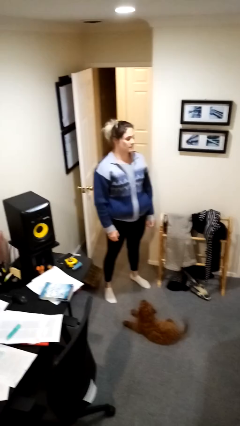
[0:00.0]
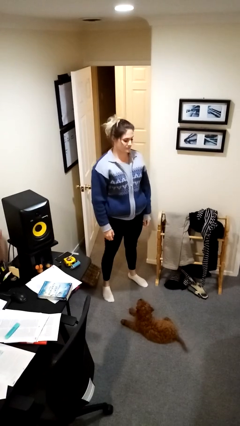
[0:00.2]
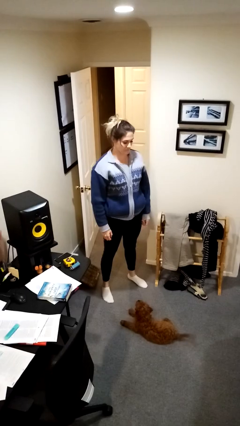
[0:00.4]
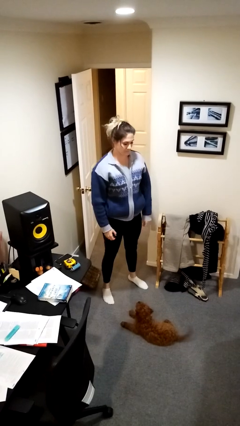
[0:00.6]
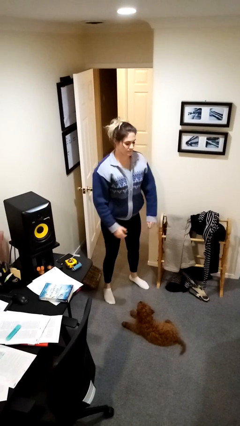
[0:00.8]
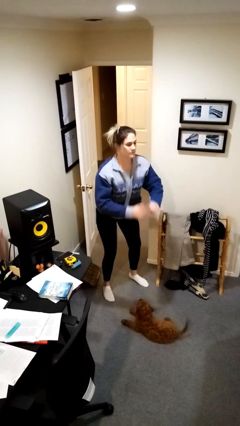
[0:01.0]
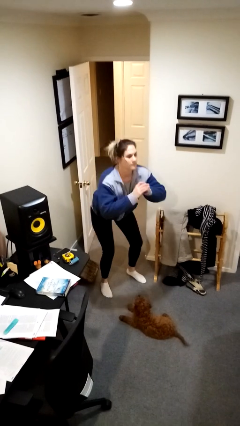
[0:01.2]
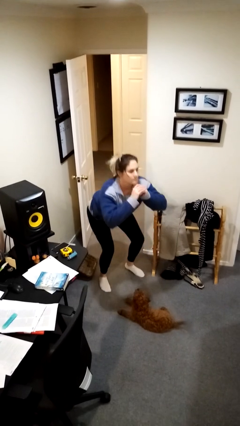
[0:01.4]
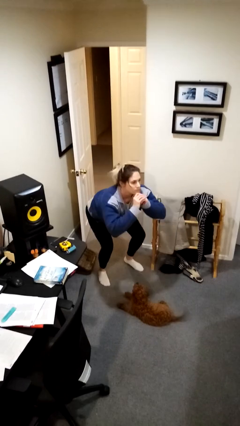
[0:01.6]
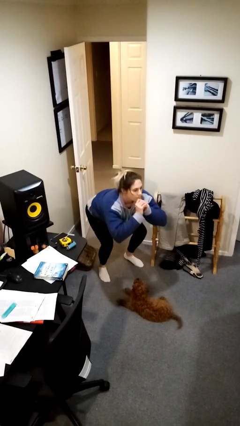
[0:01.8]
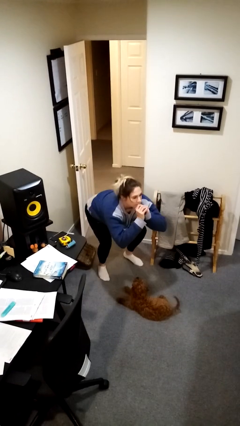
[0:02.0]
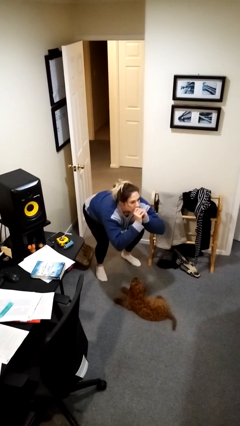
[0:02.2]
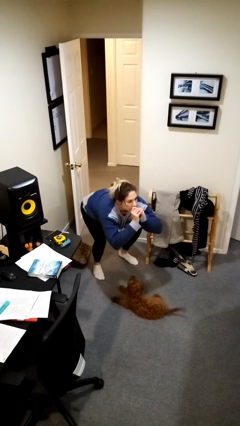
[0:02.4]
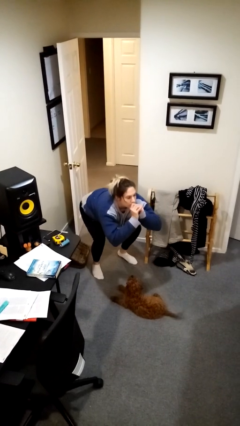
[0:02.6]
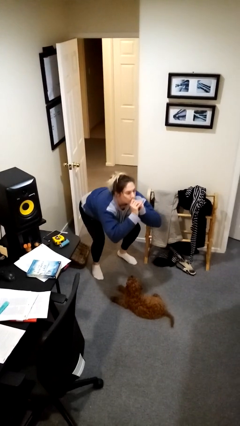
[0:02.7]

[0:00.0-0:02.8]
person squats

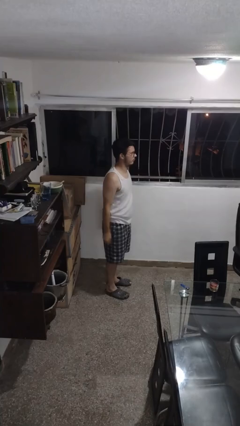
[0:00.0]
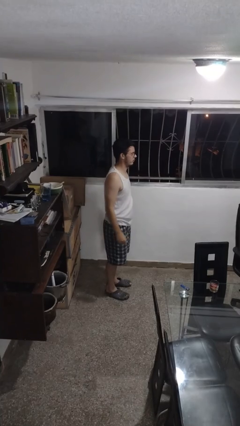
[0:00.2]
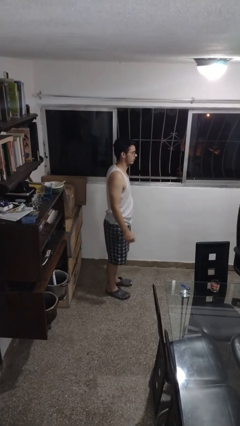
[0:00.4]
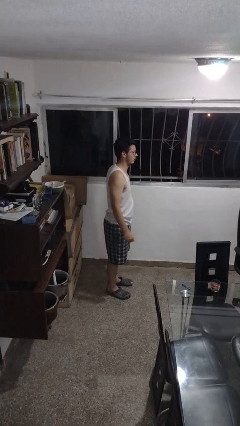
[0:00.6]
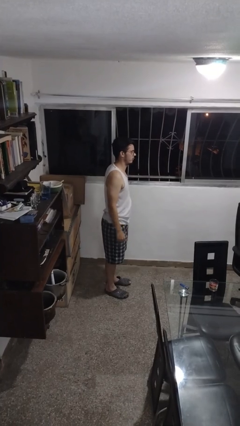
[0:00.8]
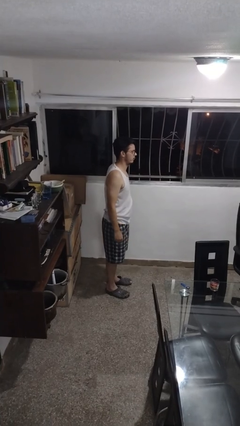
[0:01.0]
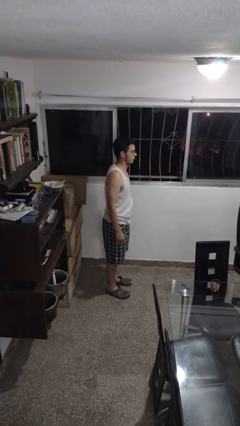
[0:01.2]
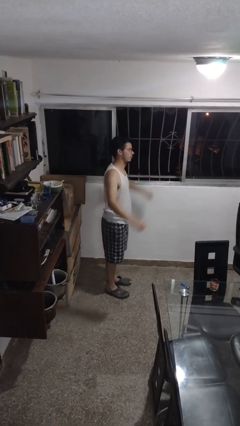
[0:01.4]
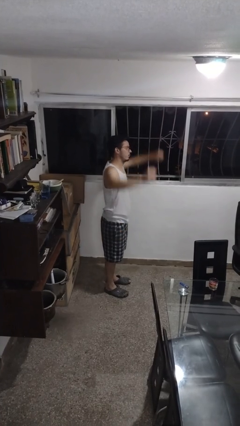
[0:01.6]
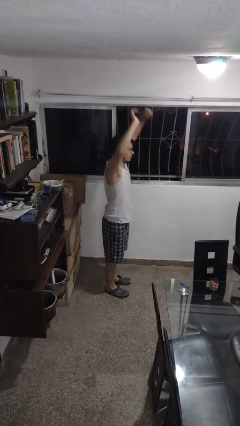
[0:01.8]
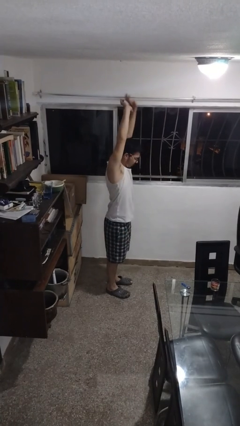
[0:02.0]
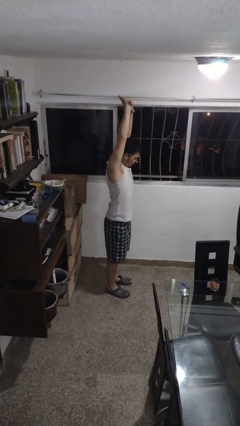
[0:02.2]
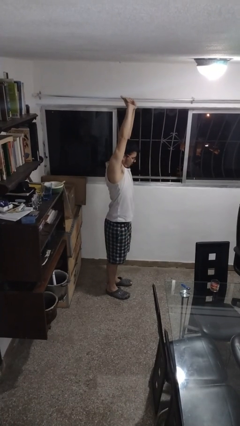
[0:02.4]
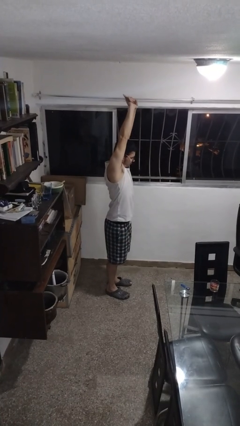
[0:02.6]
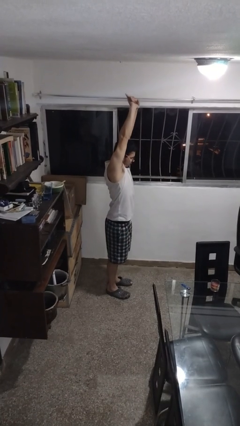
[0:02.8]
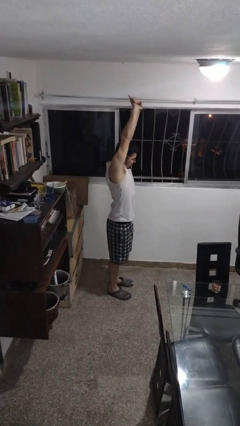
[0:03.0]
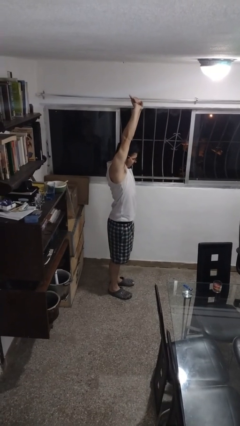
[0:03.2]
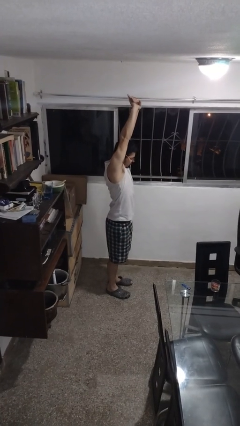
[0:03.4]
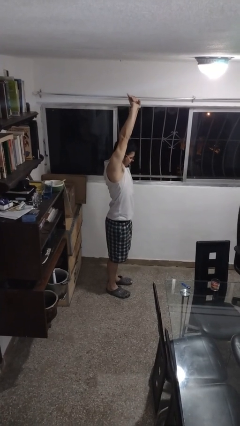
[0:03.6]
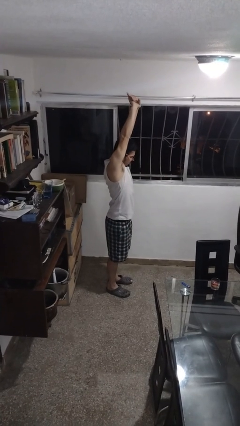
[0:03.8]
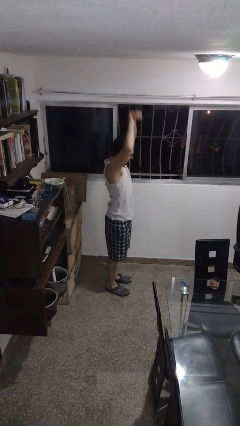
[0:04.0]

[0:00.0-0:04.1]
person stretches arms over head

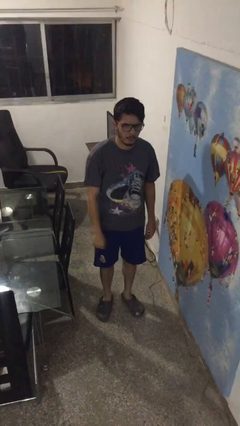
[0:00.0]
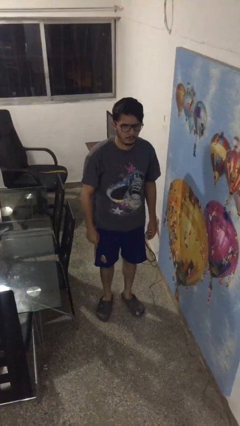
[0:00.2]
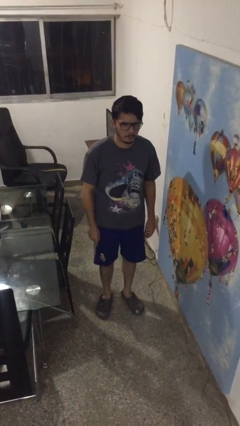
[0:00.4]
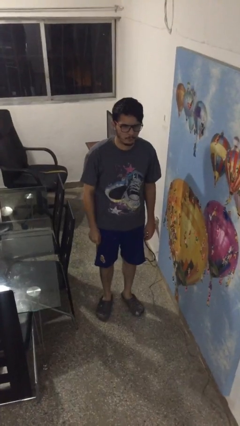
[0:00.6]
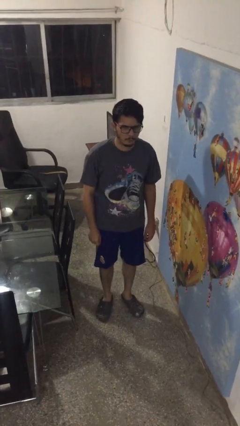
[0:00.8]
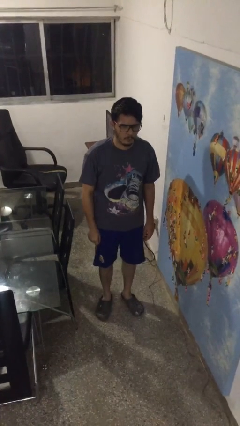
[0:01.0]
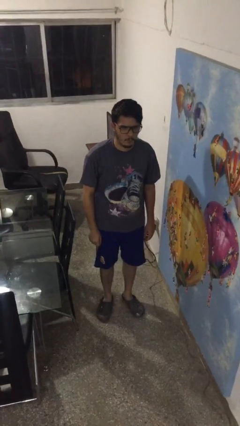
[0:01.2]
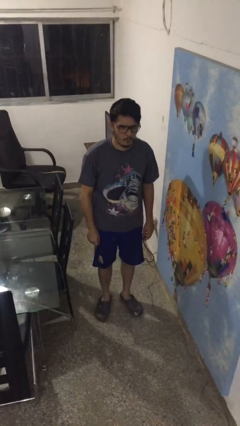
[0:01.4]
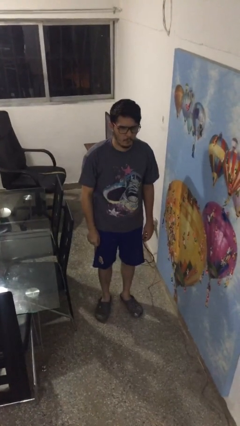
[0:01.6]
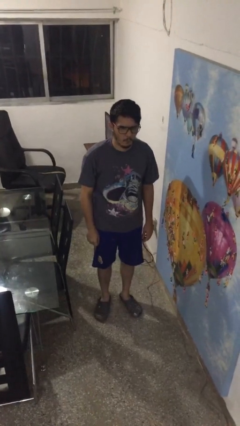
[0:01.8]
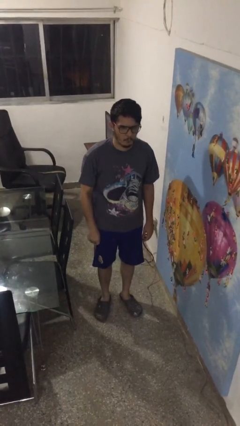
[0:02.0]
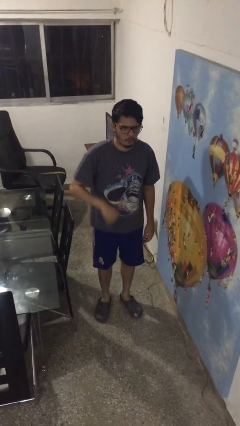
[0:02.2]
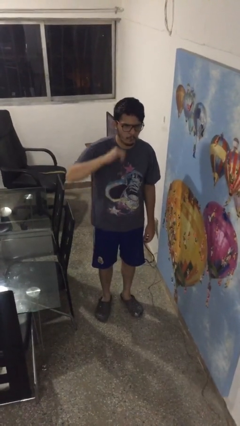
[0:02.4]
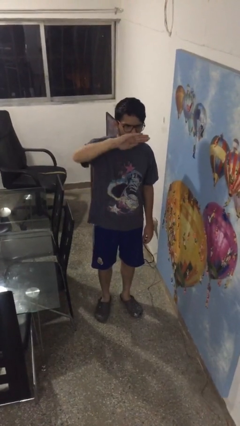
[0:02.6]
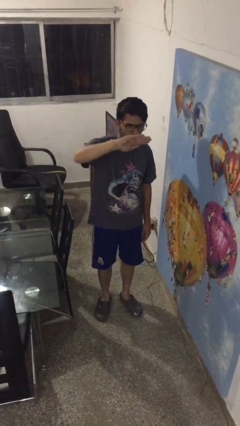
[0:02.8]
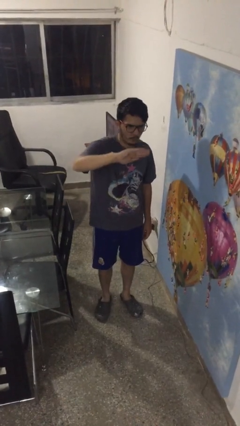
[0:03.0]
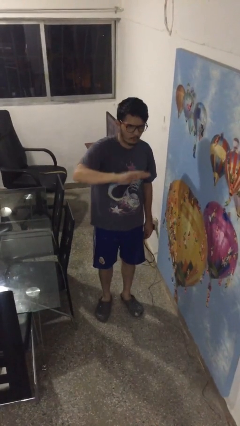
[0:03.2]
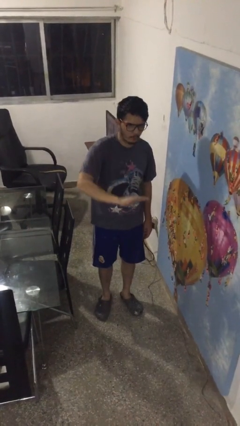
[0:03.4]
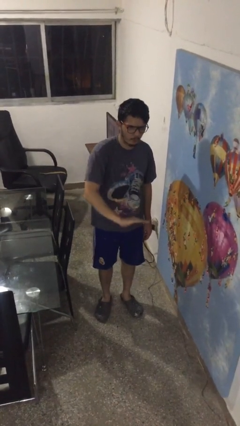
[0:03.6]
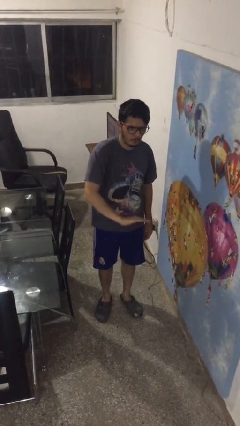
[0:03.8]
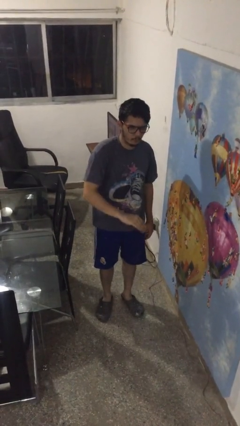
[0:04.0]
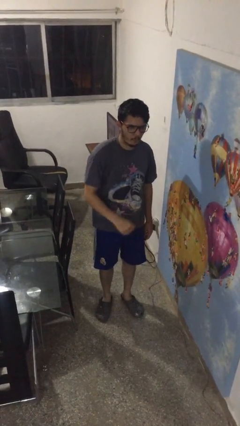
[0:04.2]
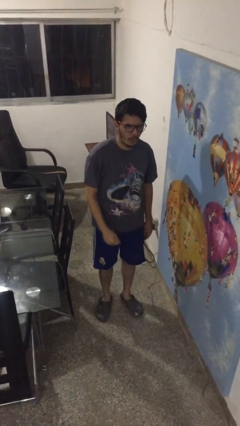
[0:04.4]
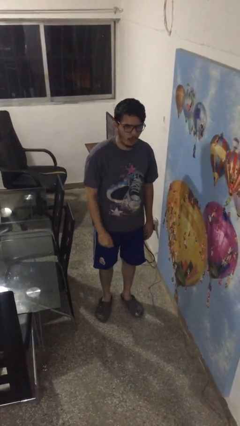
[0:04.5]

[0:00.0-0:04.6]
person gestures swipe down

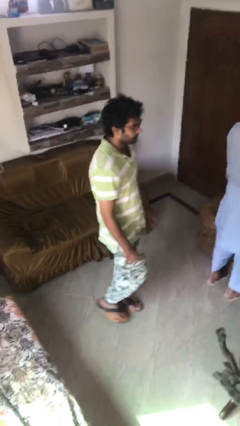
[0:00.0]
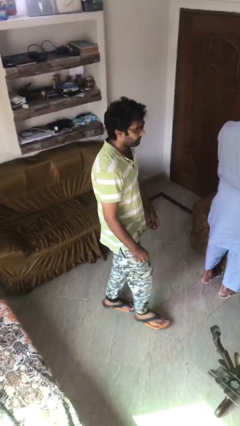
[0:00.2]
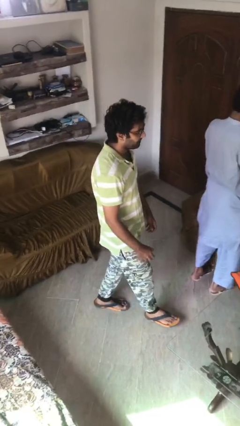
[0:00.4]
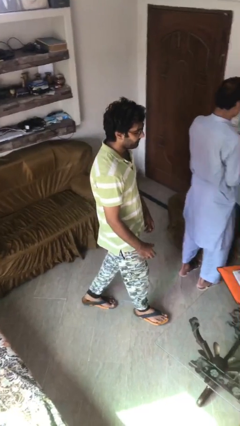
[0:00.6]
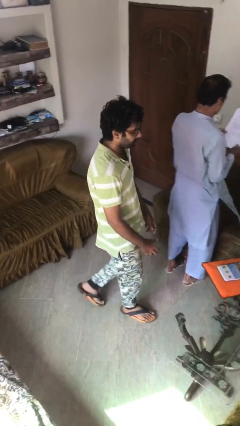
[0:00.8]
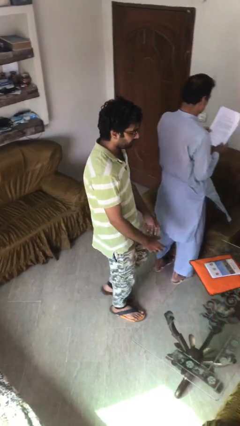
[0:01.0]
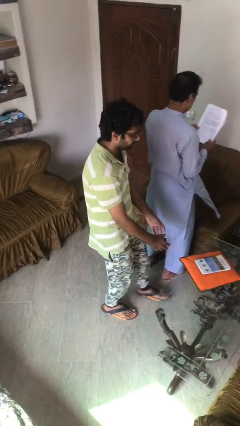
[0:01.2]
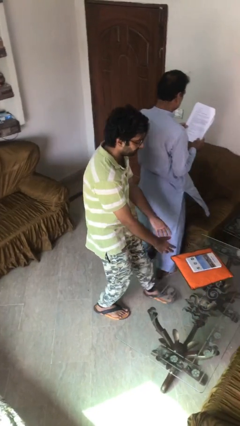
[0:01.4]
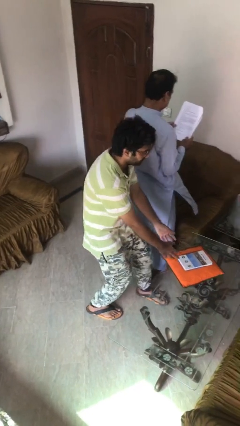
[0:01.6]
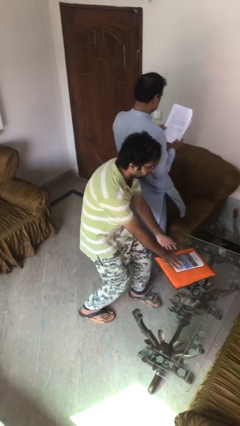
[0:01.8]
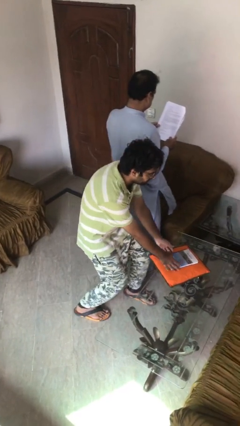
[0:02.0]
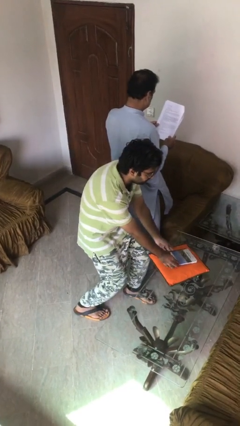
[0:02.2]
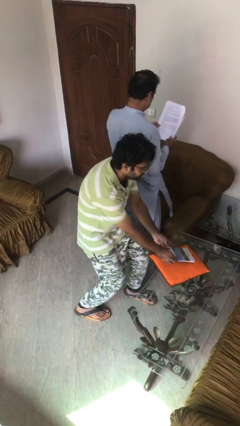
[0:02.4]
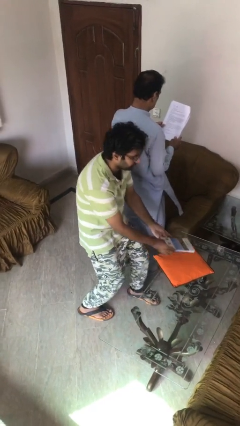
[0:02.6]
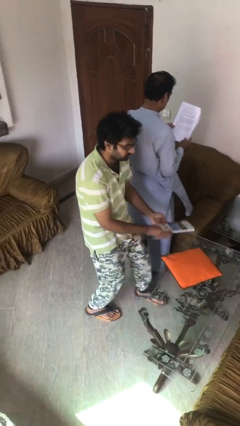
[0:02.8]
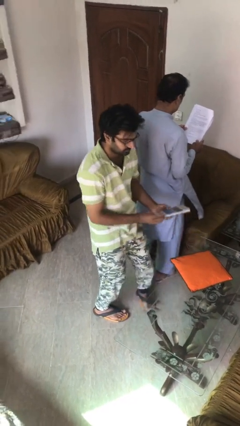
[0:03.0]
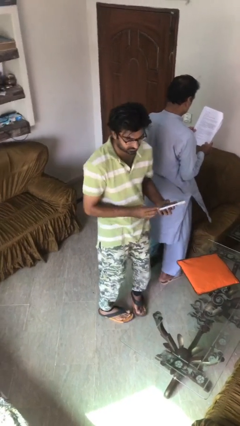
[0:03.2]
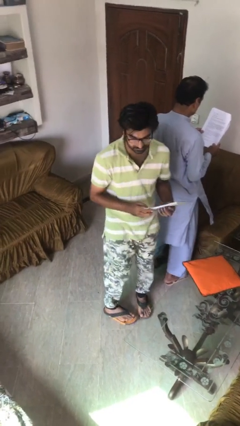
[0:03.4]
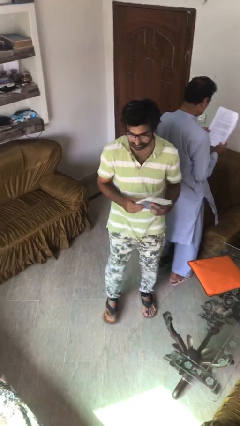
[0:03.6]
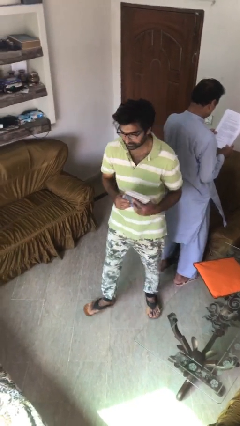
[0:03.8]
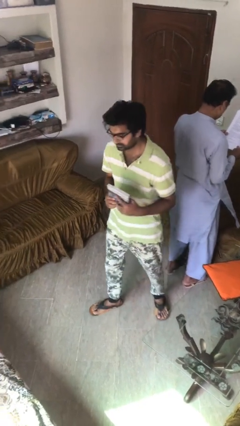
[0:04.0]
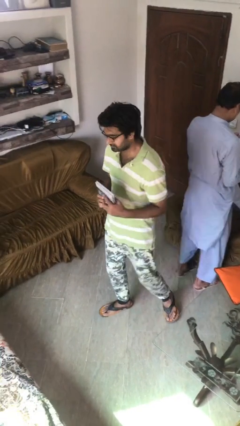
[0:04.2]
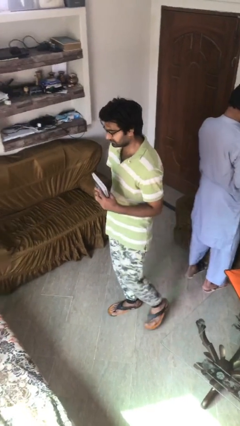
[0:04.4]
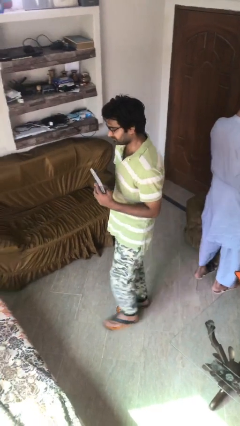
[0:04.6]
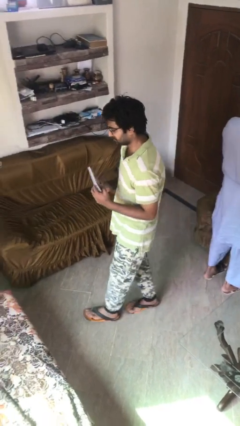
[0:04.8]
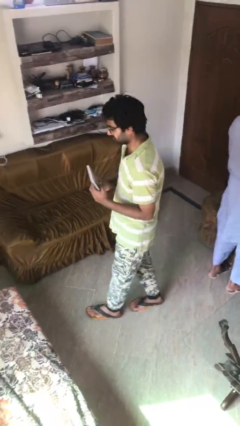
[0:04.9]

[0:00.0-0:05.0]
person steals object from person

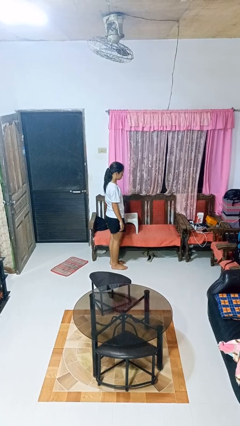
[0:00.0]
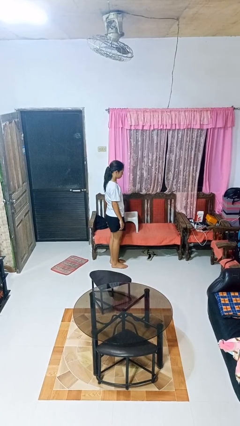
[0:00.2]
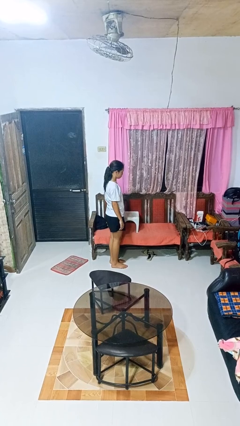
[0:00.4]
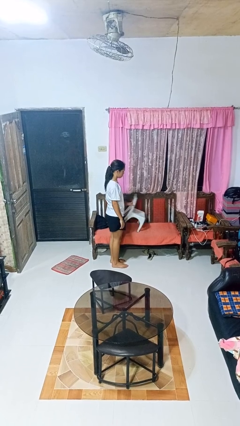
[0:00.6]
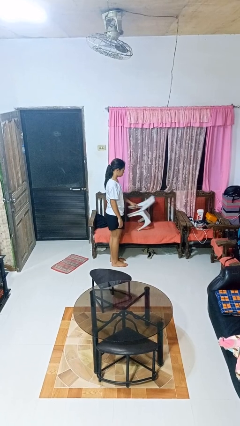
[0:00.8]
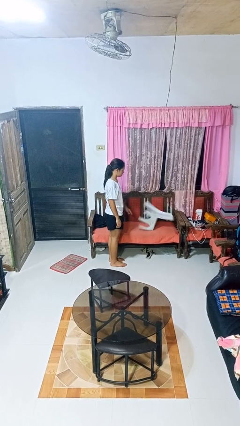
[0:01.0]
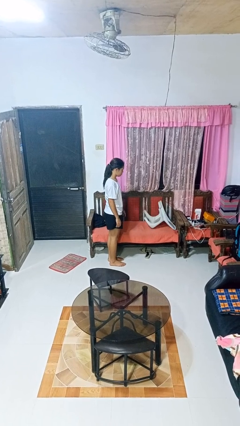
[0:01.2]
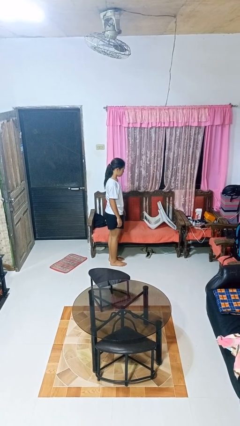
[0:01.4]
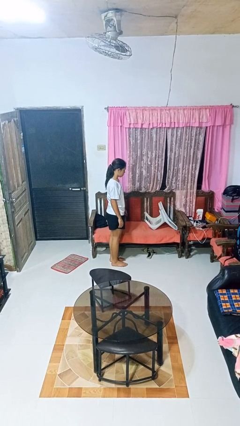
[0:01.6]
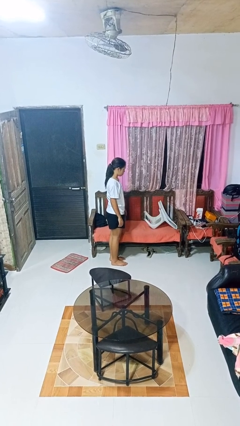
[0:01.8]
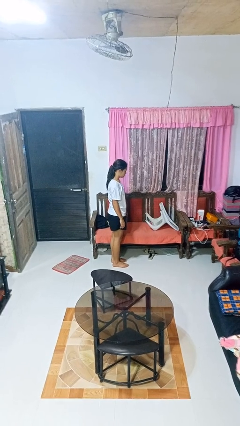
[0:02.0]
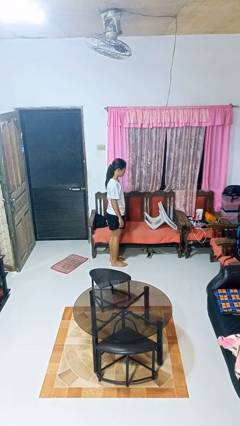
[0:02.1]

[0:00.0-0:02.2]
person knocks over furniture
